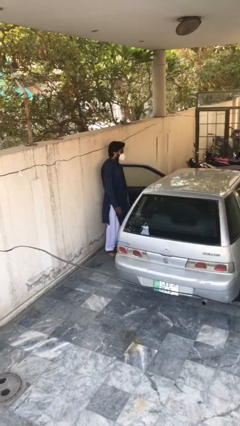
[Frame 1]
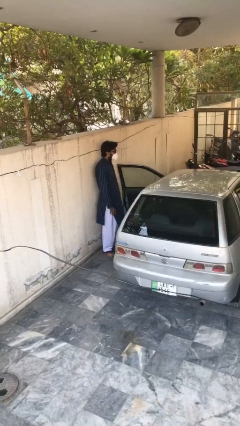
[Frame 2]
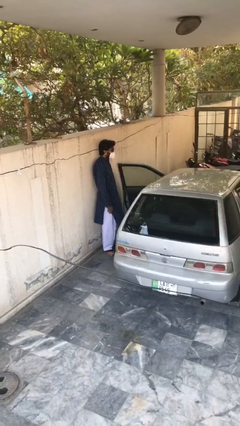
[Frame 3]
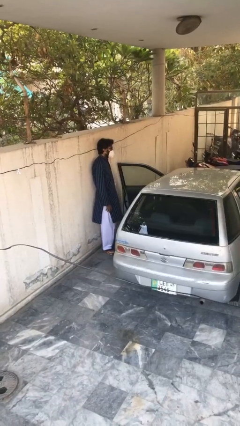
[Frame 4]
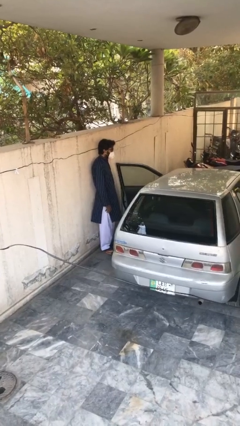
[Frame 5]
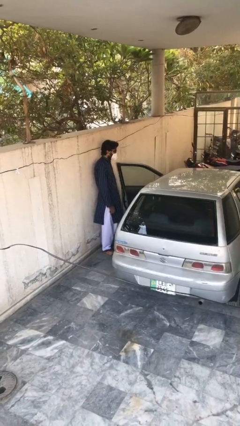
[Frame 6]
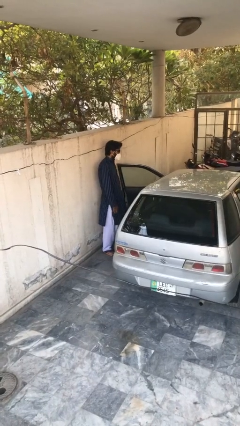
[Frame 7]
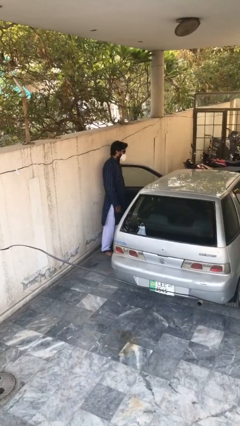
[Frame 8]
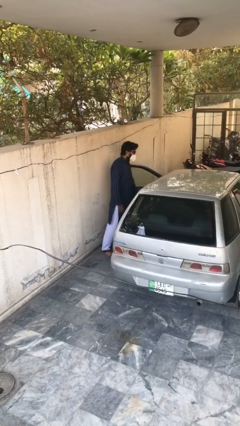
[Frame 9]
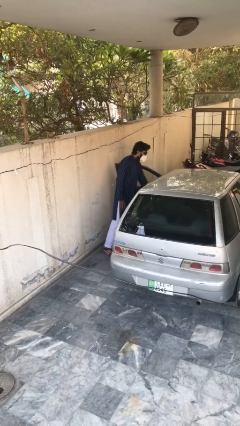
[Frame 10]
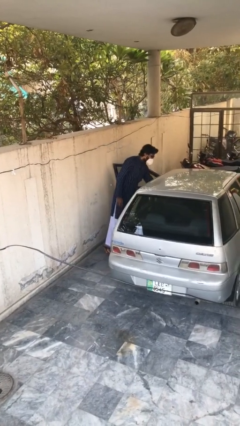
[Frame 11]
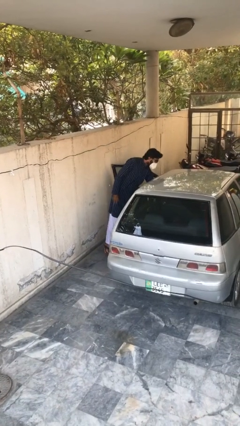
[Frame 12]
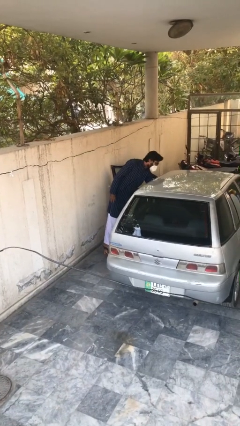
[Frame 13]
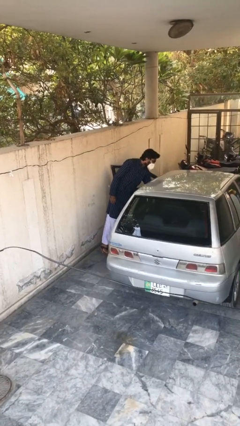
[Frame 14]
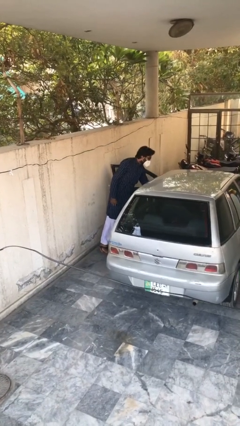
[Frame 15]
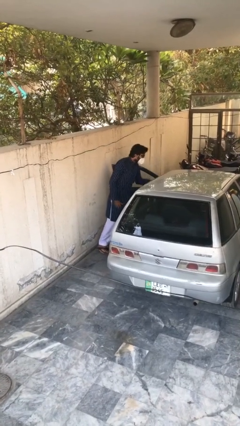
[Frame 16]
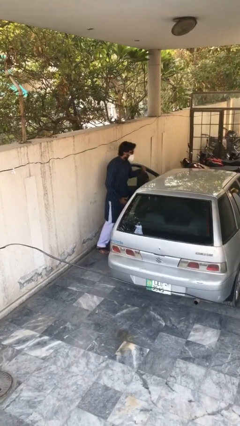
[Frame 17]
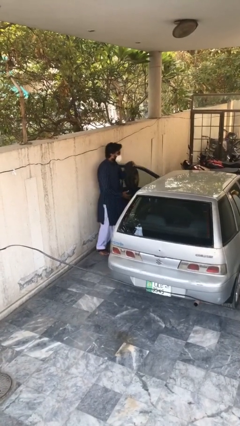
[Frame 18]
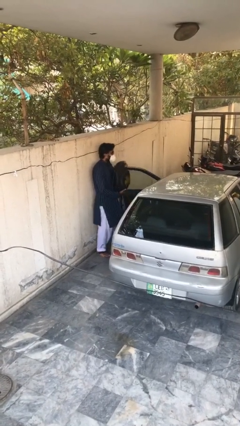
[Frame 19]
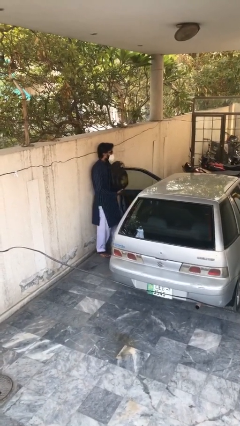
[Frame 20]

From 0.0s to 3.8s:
person unloads car

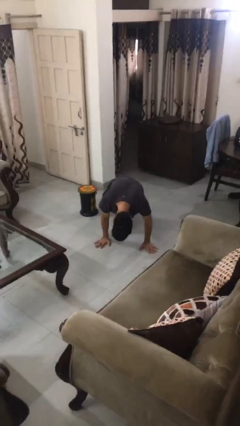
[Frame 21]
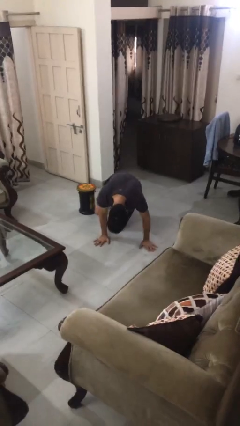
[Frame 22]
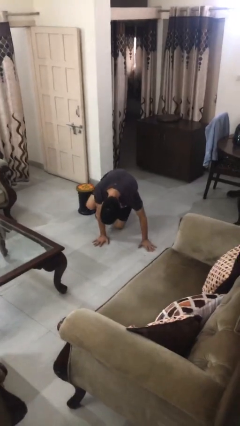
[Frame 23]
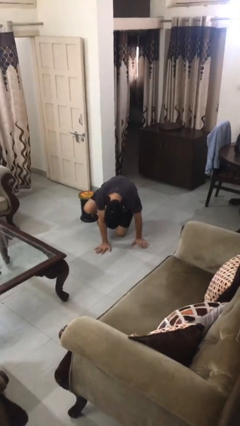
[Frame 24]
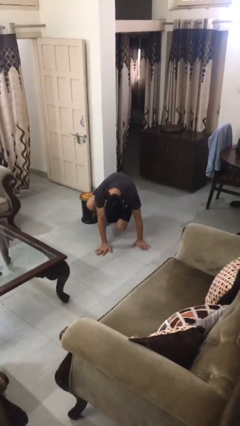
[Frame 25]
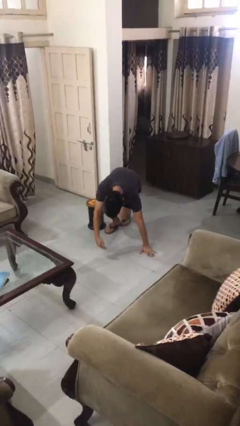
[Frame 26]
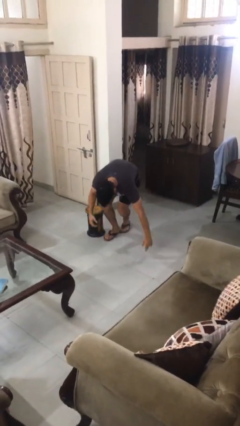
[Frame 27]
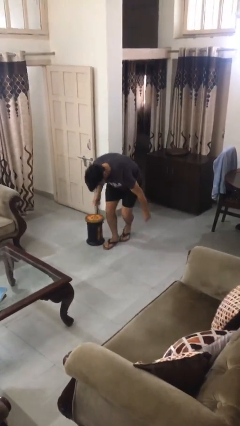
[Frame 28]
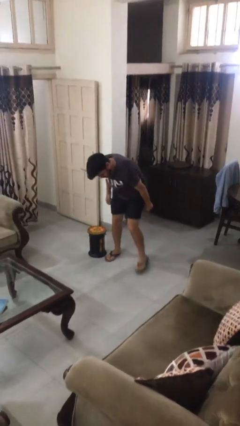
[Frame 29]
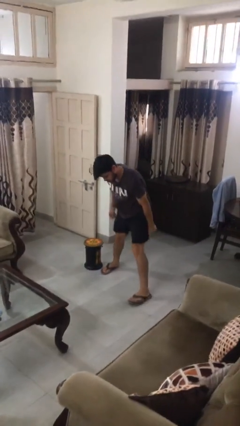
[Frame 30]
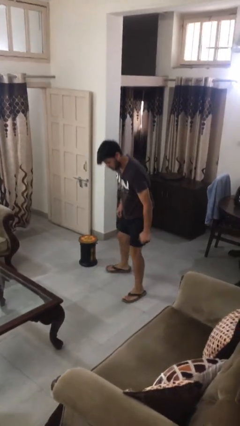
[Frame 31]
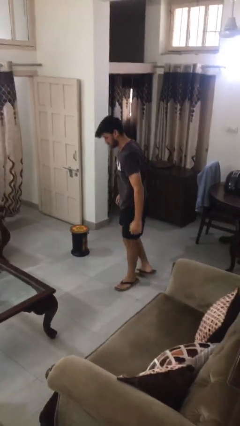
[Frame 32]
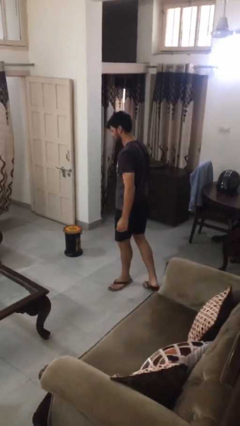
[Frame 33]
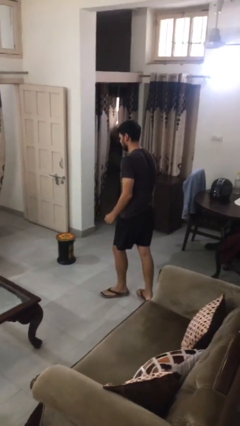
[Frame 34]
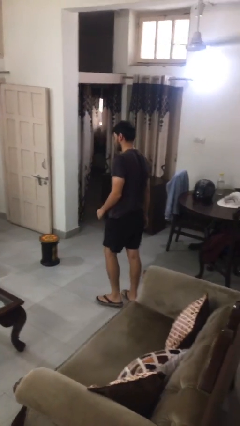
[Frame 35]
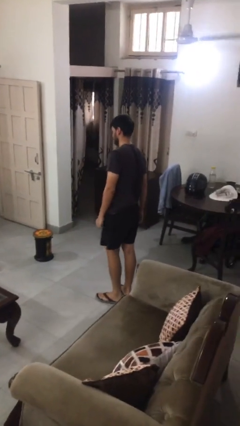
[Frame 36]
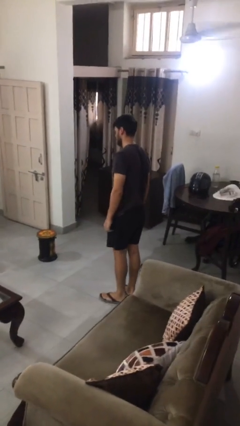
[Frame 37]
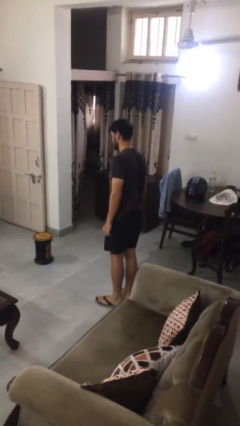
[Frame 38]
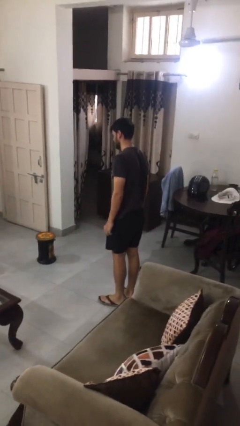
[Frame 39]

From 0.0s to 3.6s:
person stands up from floor

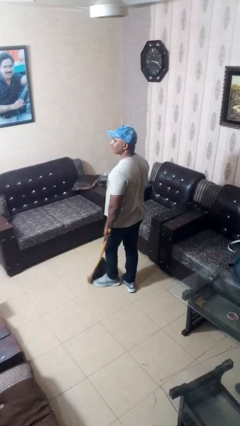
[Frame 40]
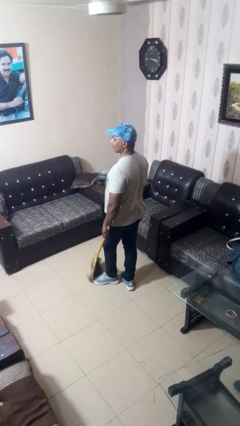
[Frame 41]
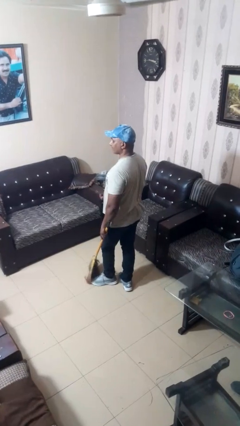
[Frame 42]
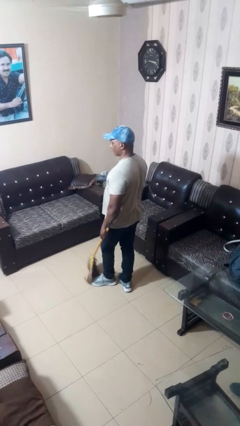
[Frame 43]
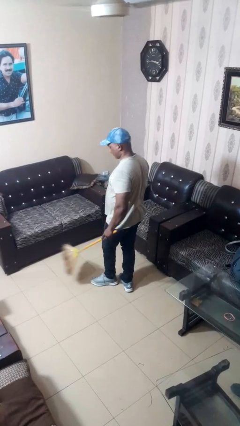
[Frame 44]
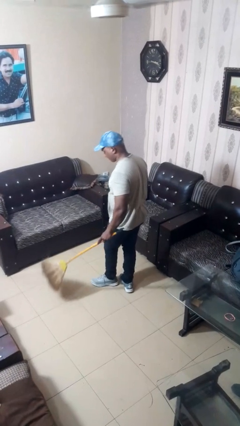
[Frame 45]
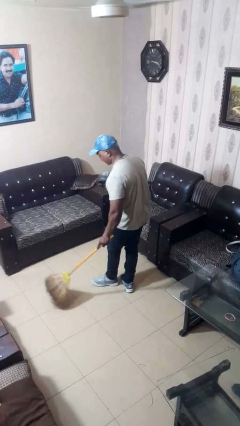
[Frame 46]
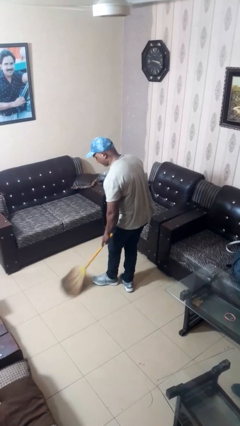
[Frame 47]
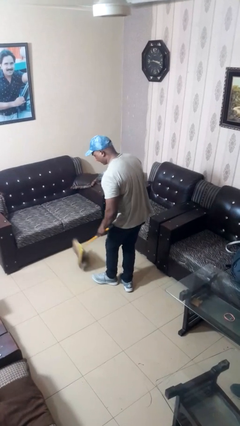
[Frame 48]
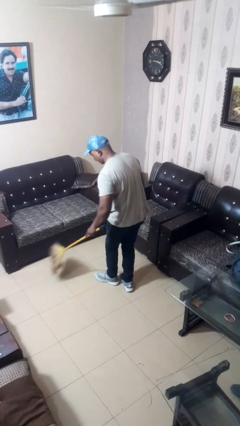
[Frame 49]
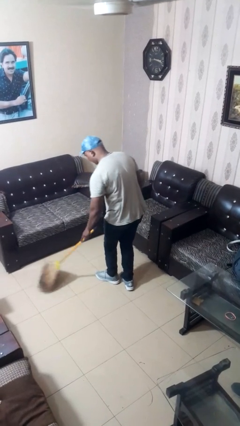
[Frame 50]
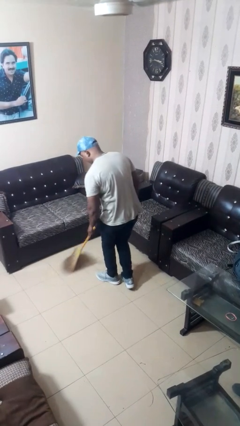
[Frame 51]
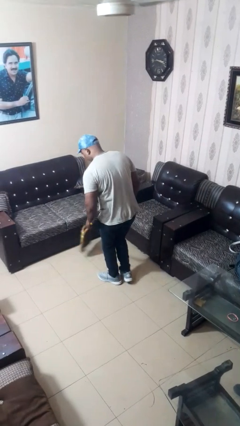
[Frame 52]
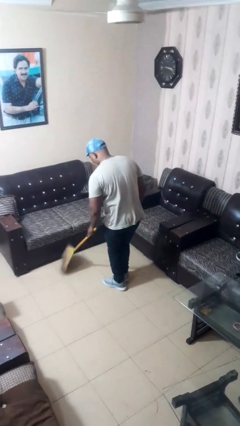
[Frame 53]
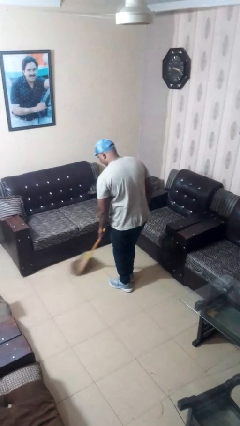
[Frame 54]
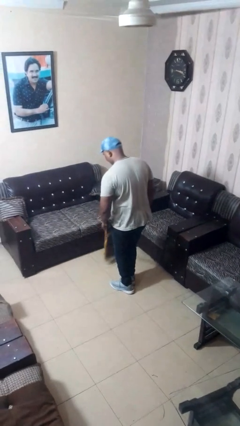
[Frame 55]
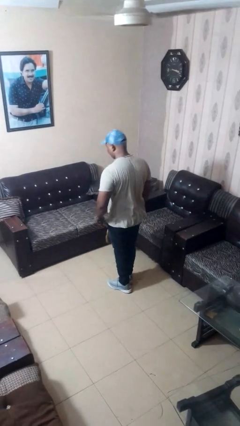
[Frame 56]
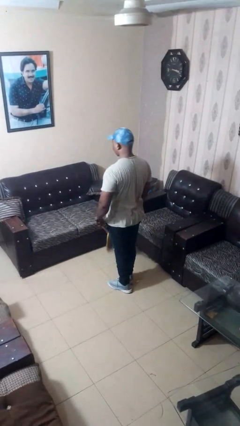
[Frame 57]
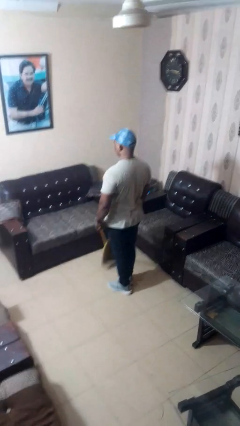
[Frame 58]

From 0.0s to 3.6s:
person sweeps floor

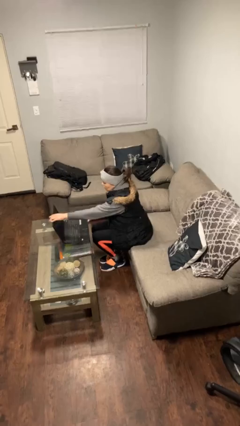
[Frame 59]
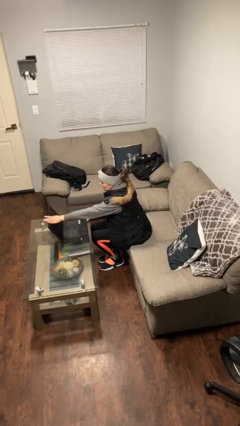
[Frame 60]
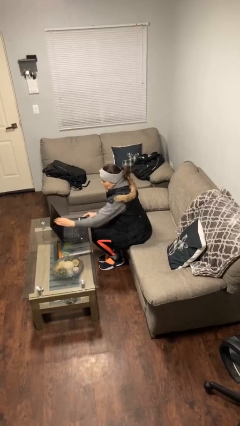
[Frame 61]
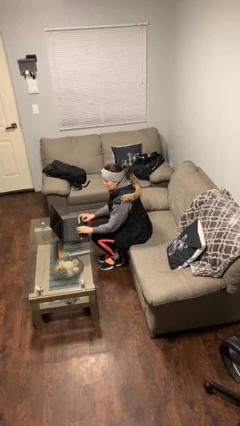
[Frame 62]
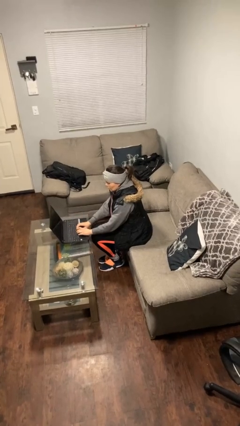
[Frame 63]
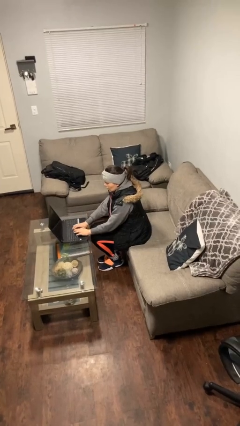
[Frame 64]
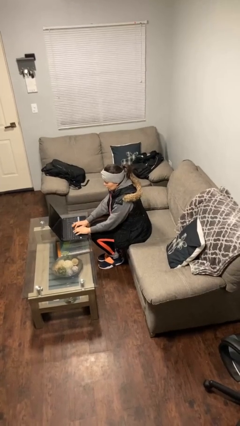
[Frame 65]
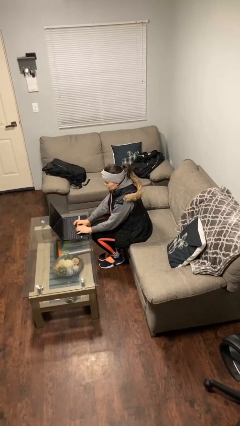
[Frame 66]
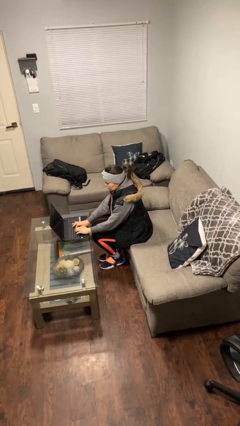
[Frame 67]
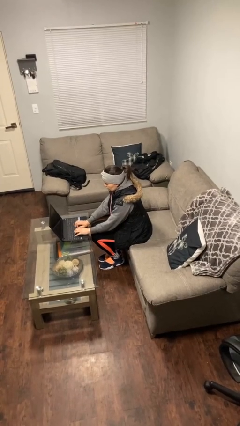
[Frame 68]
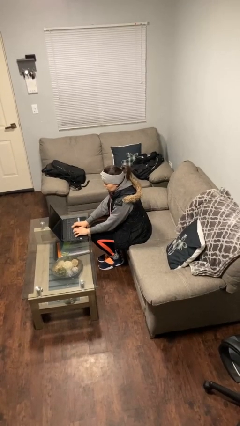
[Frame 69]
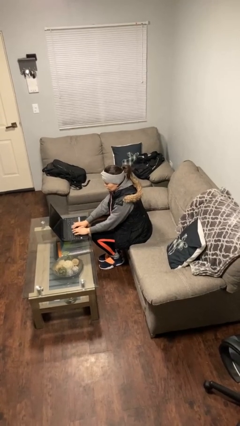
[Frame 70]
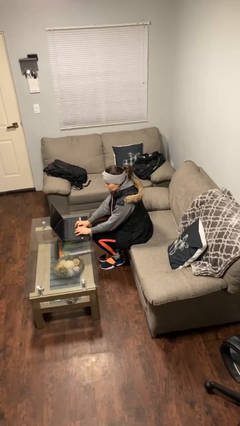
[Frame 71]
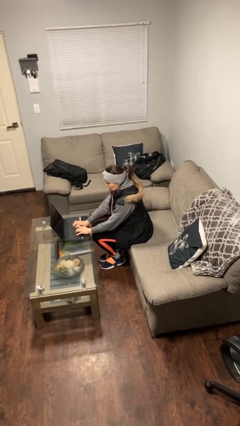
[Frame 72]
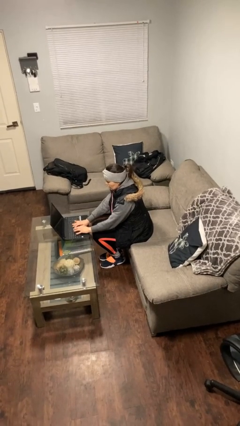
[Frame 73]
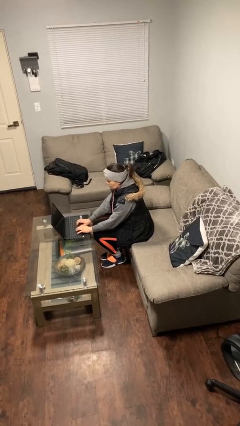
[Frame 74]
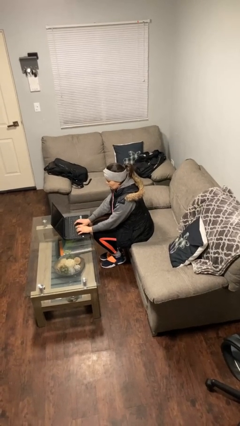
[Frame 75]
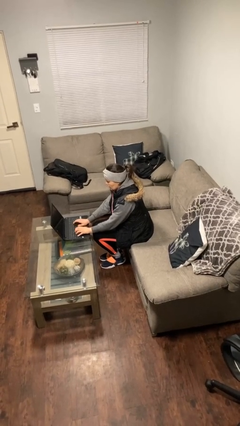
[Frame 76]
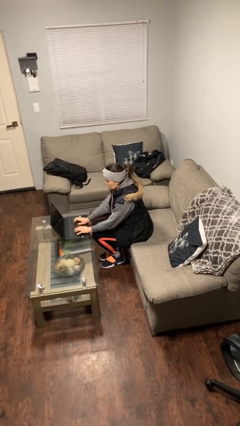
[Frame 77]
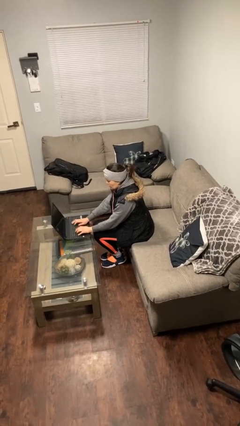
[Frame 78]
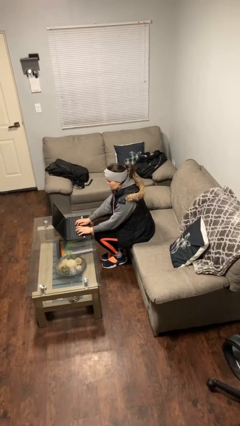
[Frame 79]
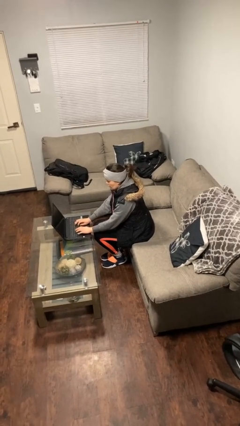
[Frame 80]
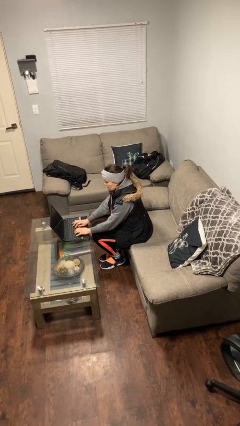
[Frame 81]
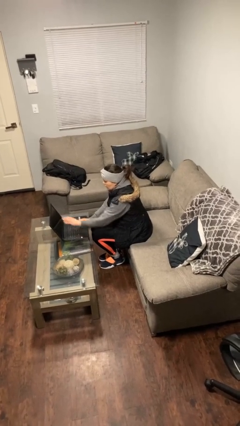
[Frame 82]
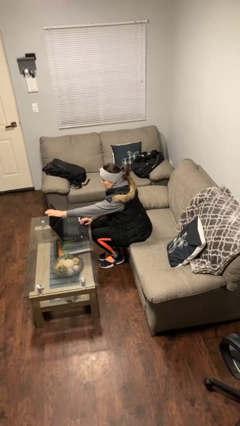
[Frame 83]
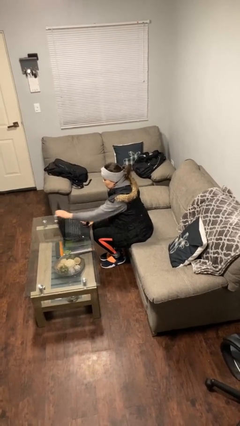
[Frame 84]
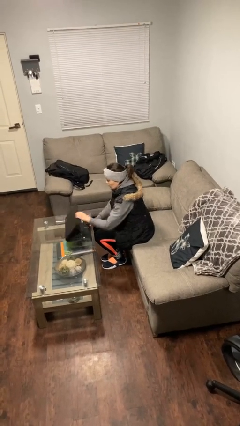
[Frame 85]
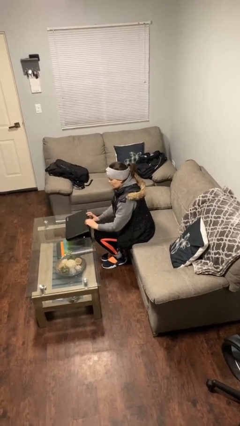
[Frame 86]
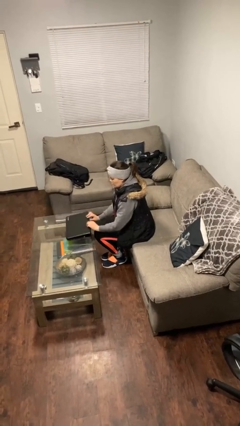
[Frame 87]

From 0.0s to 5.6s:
person interacts with laptop

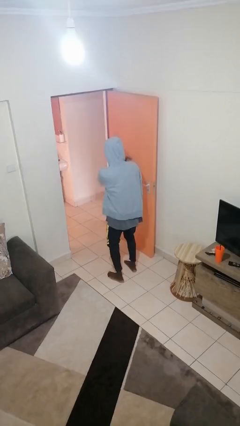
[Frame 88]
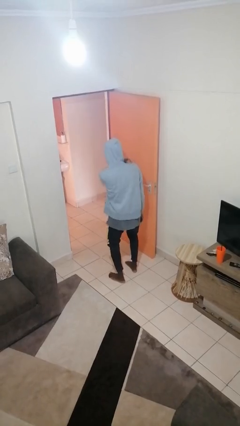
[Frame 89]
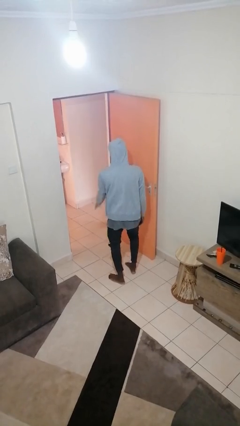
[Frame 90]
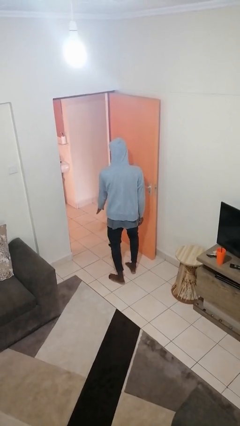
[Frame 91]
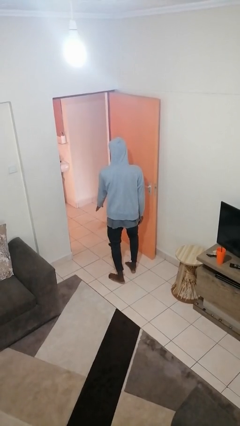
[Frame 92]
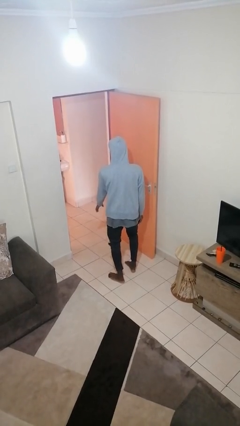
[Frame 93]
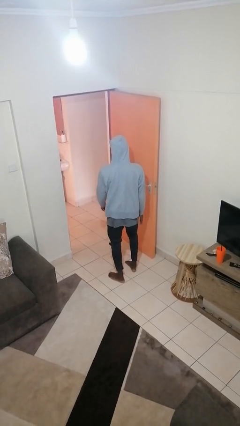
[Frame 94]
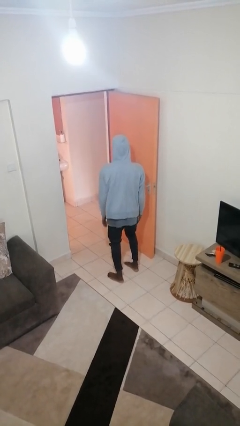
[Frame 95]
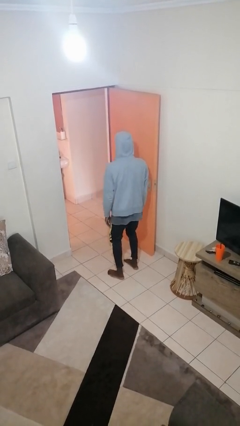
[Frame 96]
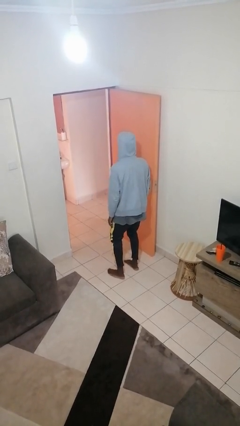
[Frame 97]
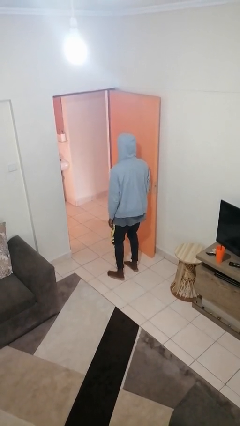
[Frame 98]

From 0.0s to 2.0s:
person karate chop
